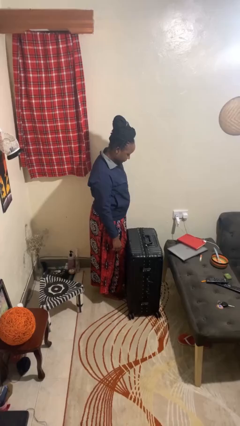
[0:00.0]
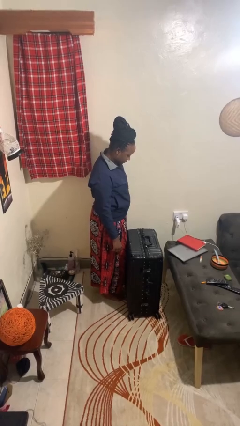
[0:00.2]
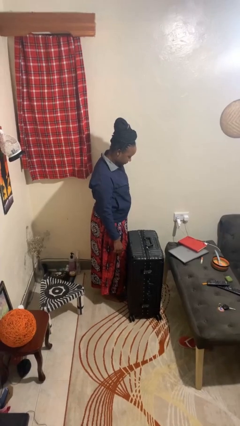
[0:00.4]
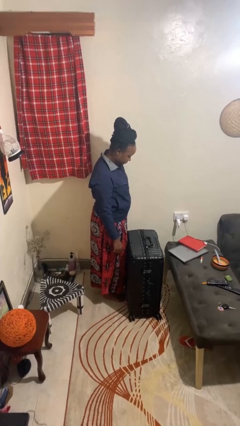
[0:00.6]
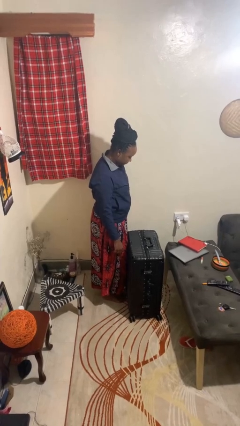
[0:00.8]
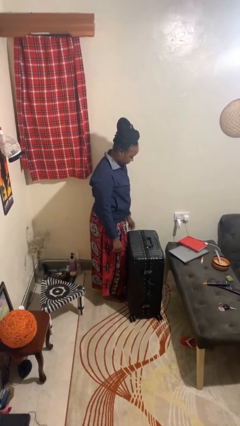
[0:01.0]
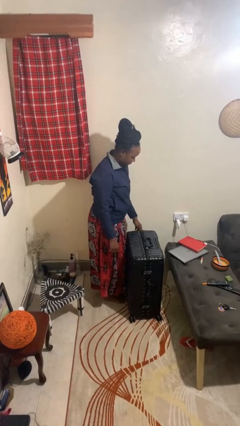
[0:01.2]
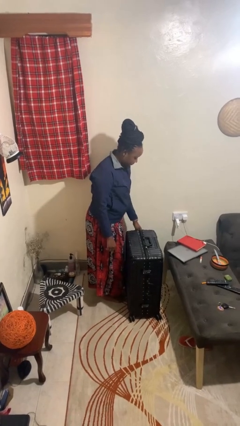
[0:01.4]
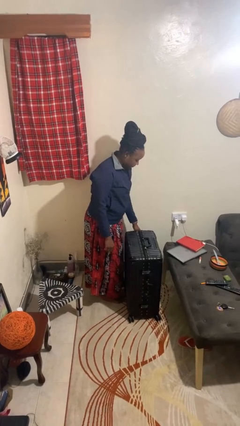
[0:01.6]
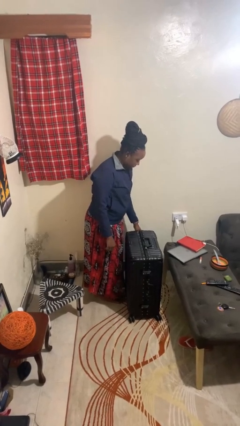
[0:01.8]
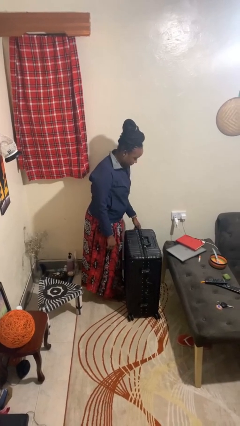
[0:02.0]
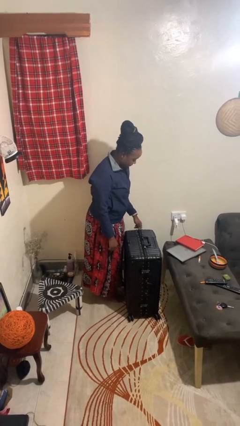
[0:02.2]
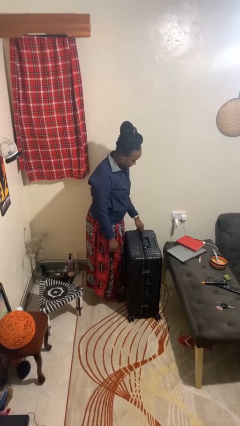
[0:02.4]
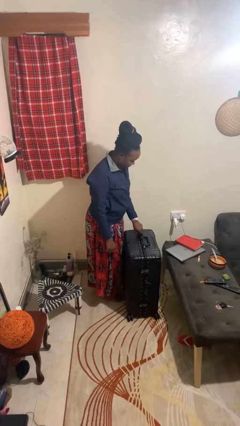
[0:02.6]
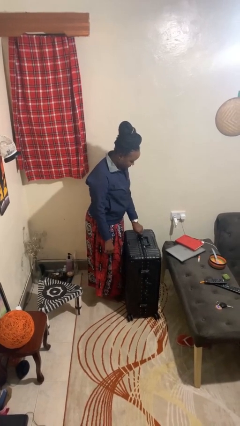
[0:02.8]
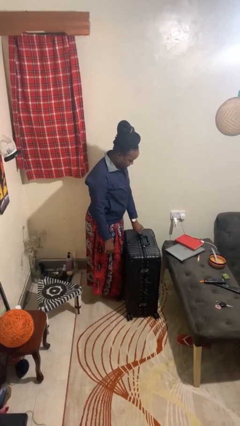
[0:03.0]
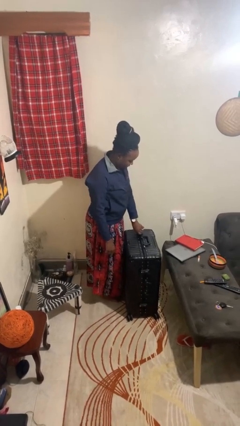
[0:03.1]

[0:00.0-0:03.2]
person opens suitcase

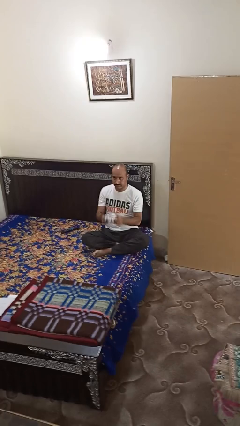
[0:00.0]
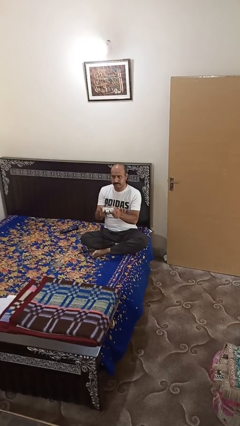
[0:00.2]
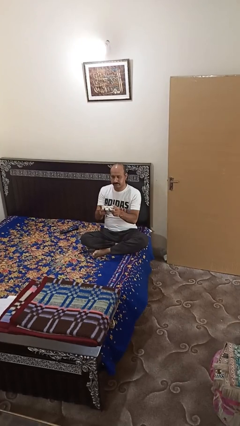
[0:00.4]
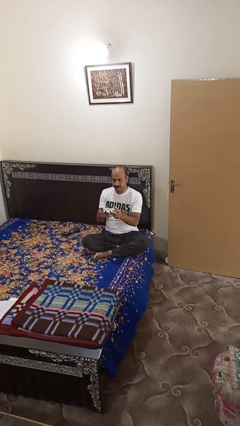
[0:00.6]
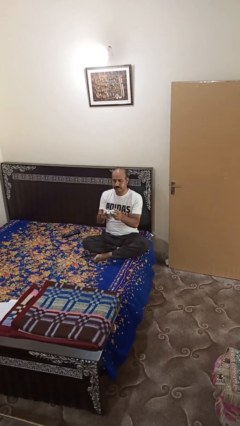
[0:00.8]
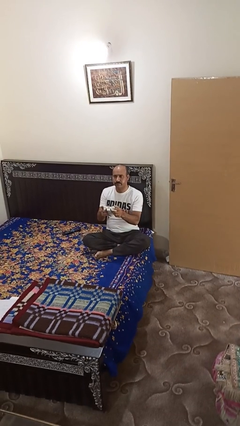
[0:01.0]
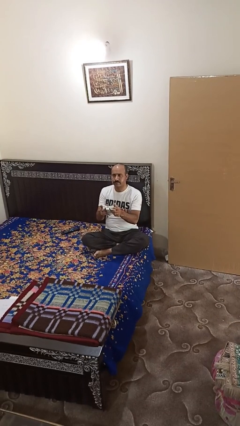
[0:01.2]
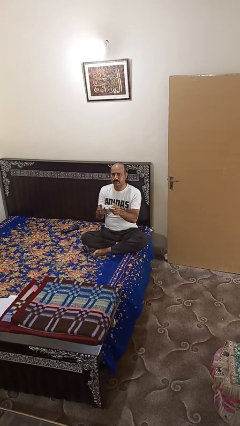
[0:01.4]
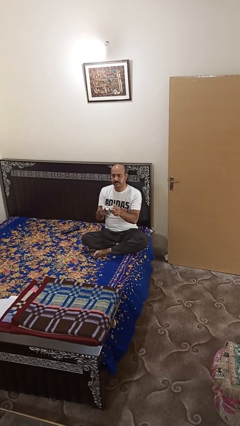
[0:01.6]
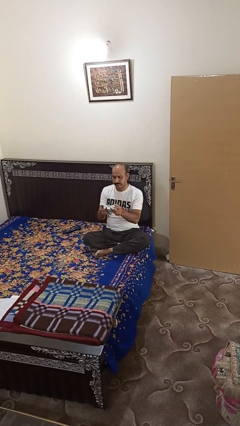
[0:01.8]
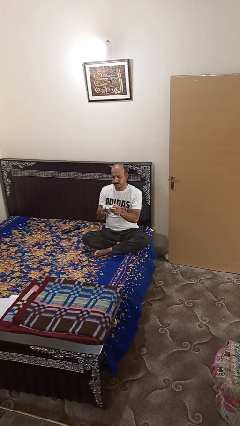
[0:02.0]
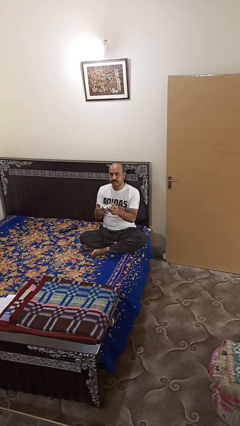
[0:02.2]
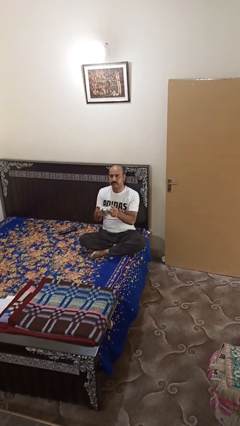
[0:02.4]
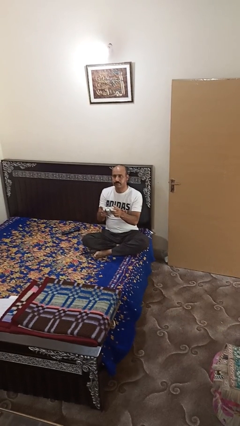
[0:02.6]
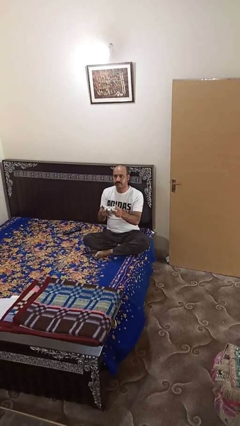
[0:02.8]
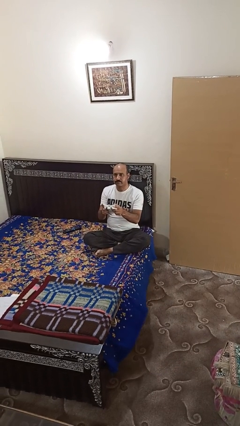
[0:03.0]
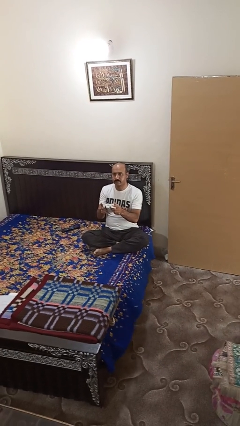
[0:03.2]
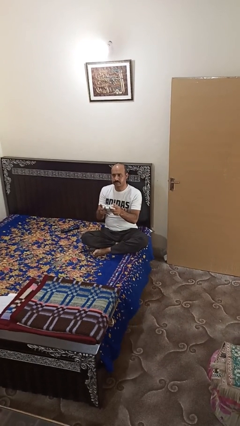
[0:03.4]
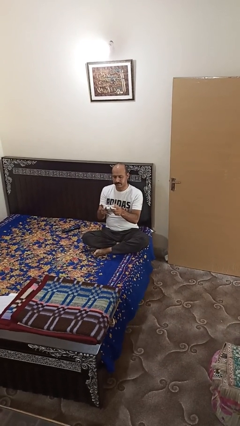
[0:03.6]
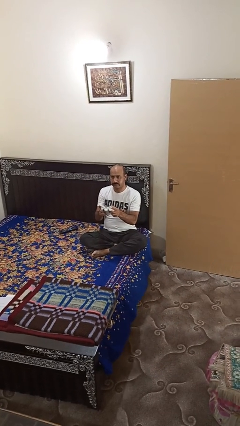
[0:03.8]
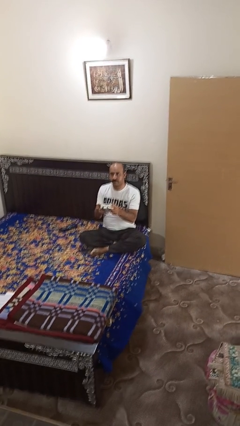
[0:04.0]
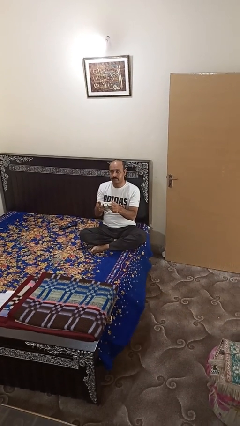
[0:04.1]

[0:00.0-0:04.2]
person interacts with handheld game

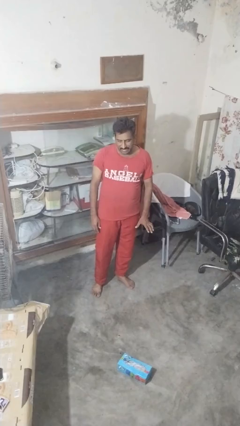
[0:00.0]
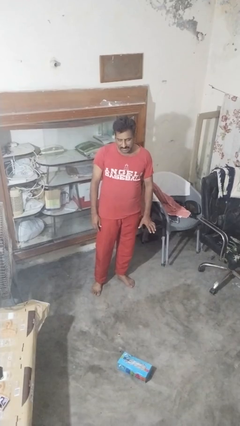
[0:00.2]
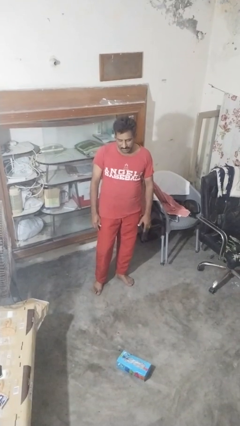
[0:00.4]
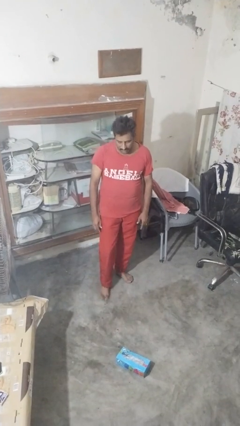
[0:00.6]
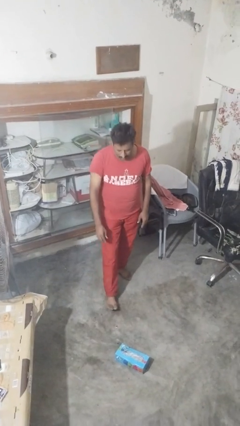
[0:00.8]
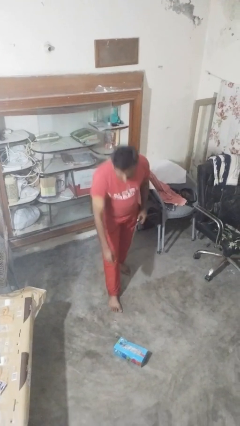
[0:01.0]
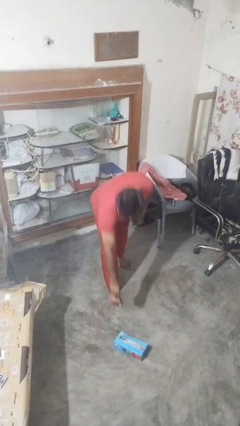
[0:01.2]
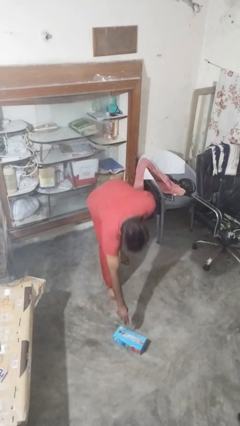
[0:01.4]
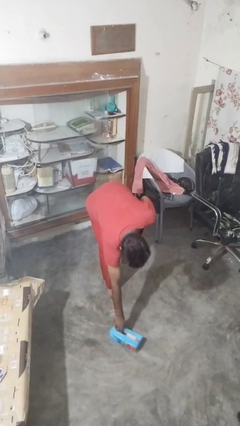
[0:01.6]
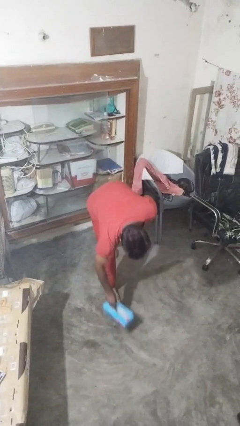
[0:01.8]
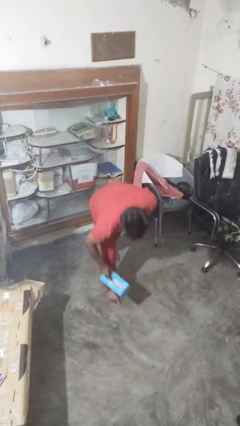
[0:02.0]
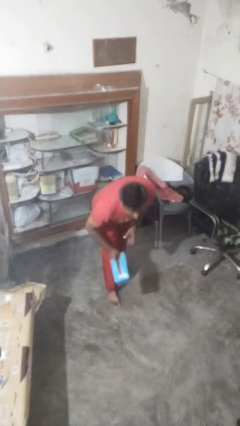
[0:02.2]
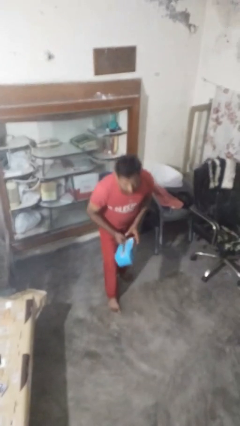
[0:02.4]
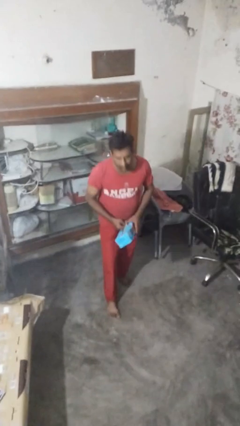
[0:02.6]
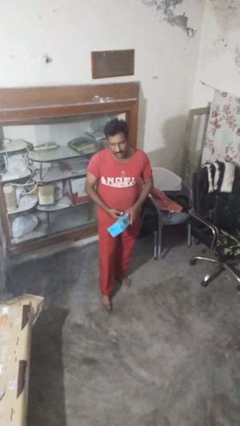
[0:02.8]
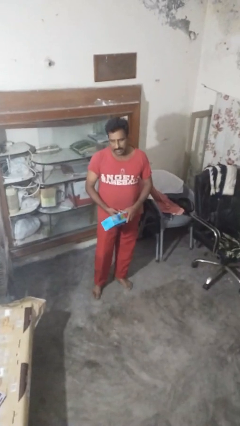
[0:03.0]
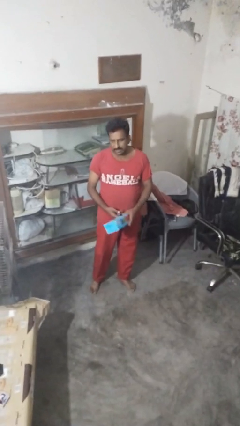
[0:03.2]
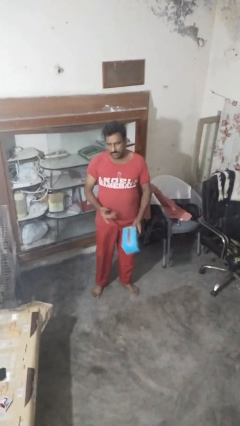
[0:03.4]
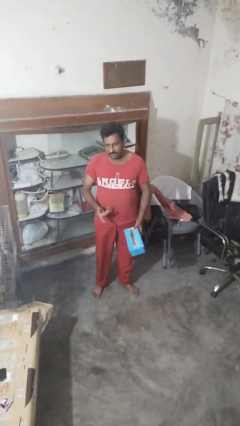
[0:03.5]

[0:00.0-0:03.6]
person picks up object from floor

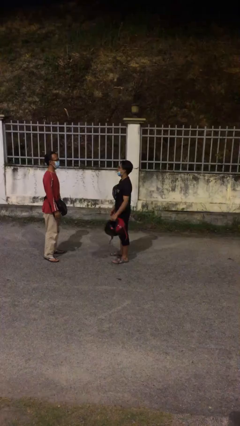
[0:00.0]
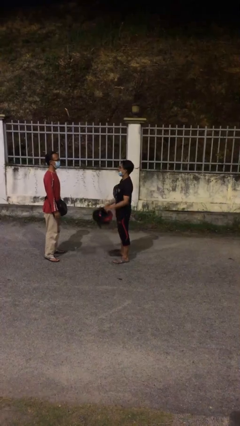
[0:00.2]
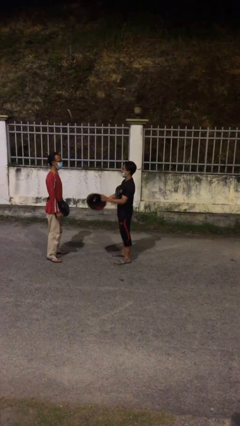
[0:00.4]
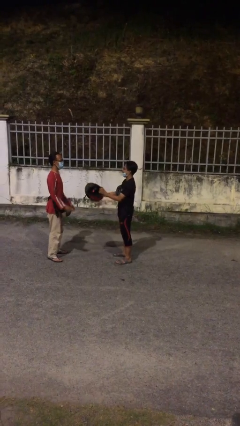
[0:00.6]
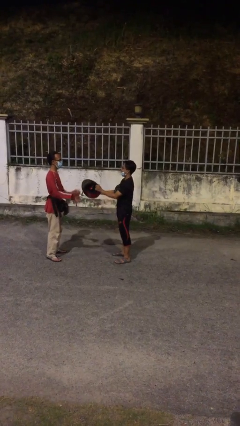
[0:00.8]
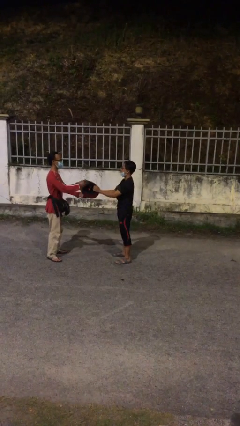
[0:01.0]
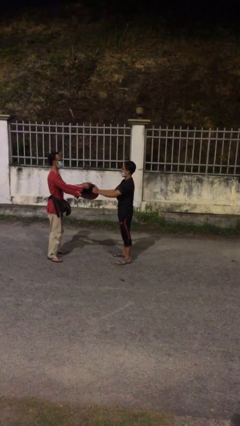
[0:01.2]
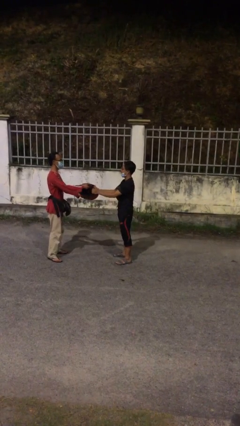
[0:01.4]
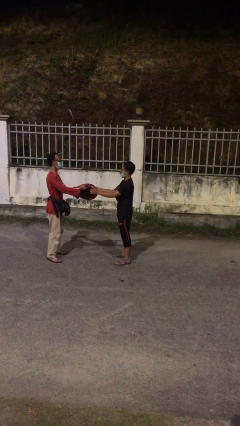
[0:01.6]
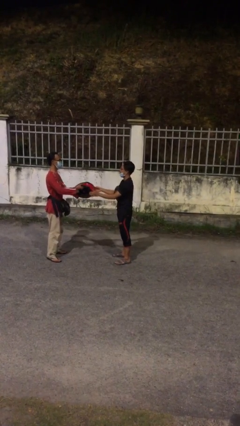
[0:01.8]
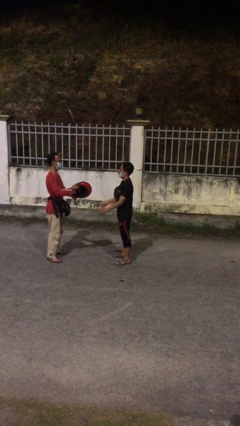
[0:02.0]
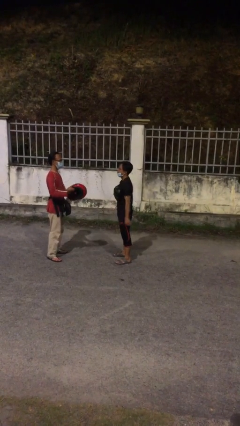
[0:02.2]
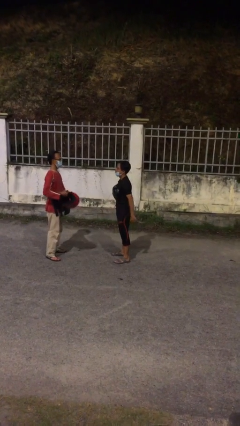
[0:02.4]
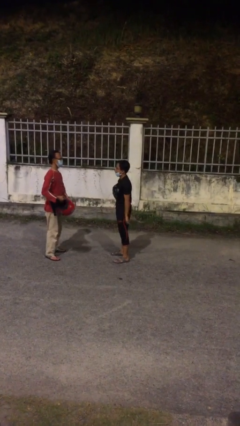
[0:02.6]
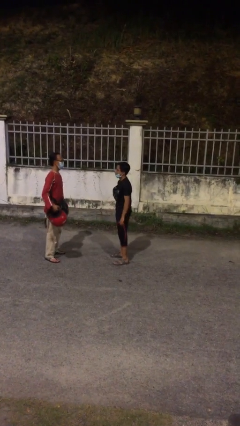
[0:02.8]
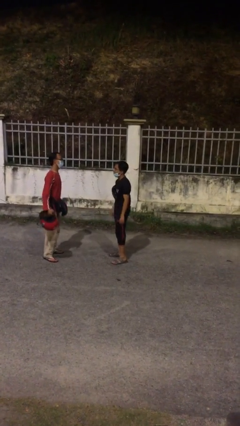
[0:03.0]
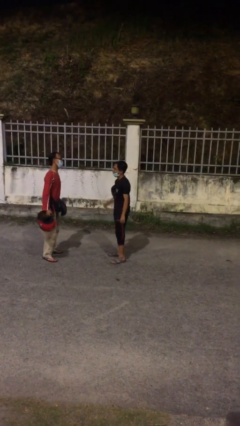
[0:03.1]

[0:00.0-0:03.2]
person transfers object to person

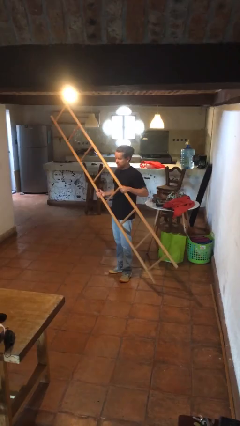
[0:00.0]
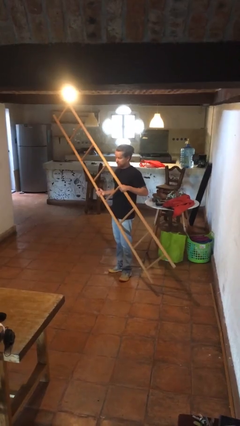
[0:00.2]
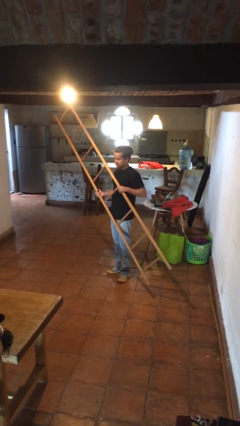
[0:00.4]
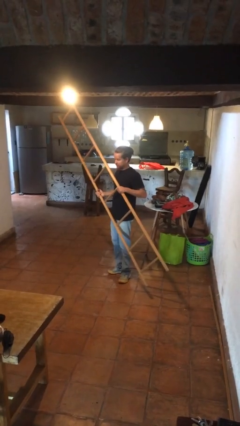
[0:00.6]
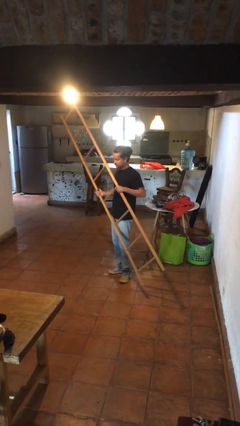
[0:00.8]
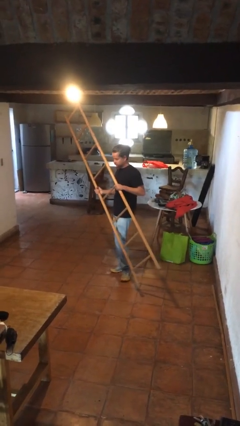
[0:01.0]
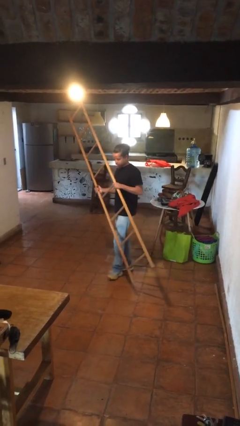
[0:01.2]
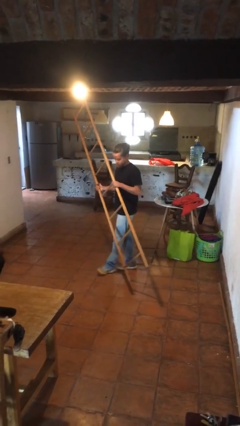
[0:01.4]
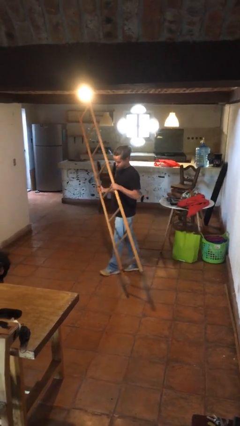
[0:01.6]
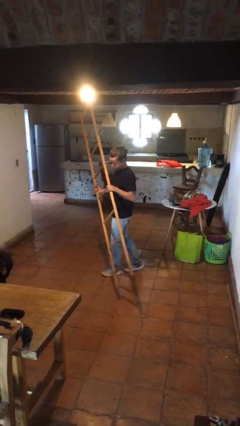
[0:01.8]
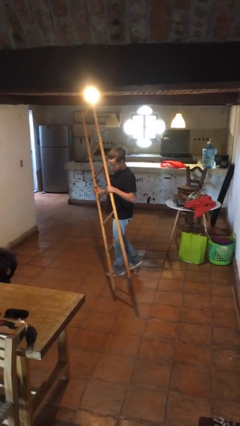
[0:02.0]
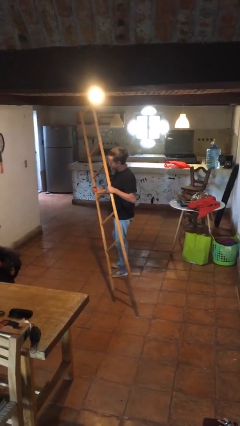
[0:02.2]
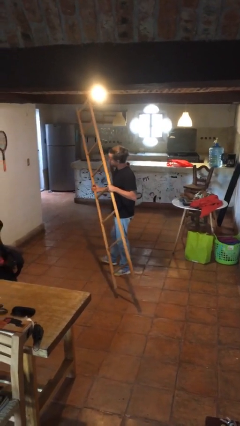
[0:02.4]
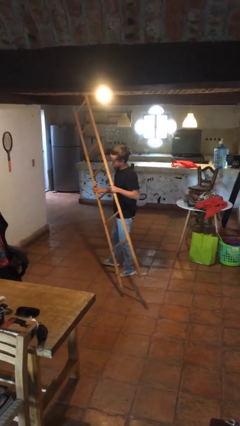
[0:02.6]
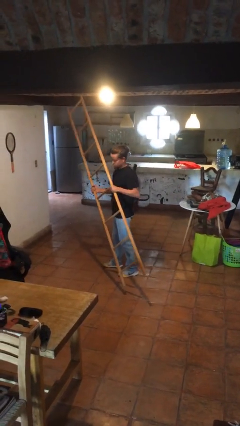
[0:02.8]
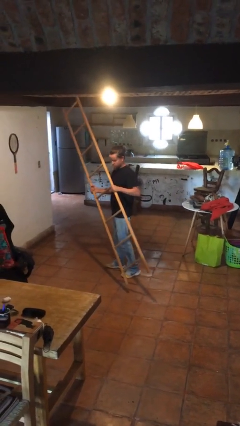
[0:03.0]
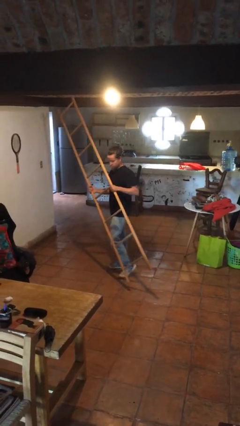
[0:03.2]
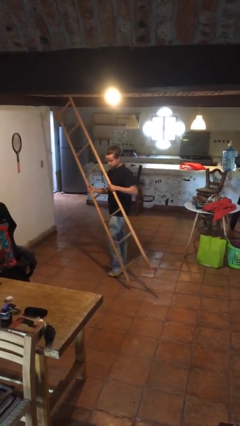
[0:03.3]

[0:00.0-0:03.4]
person carries furniture
